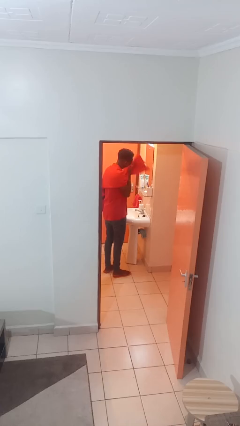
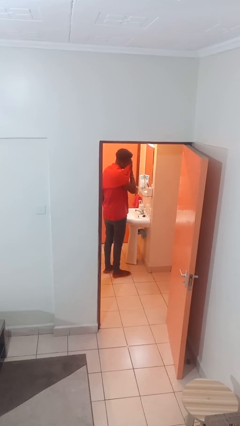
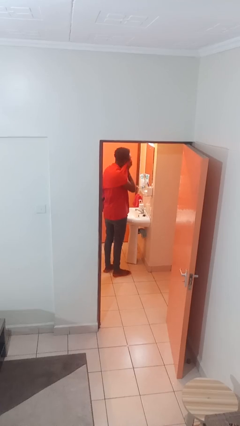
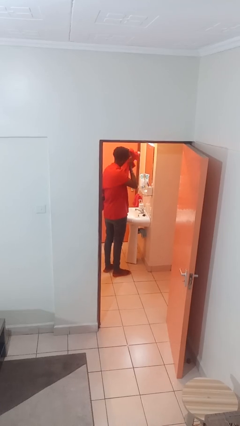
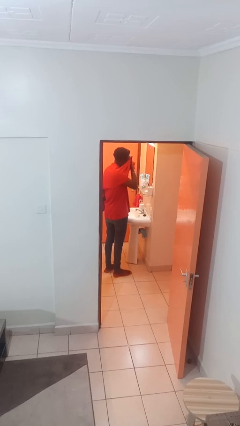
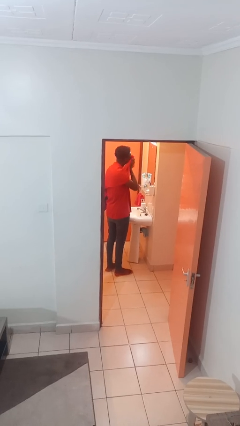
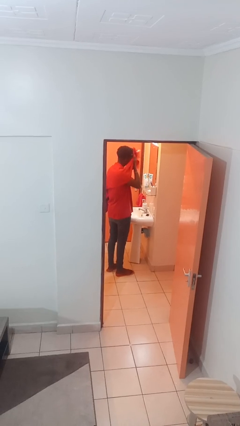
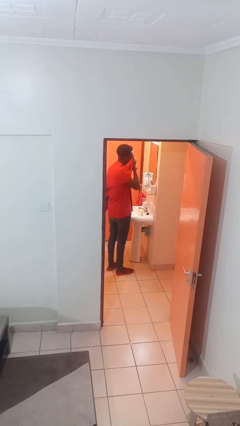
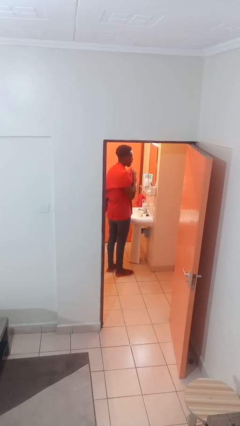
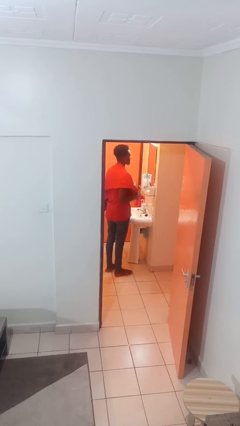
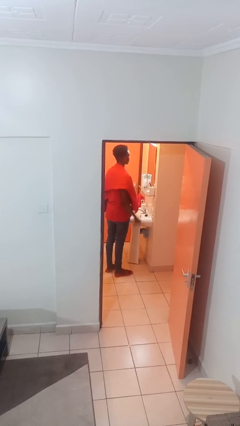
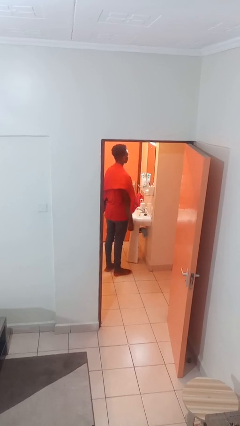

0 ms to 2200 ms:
person dries face with towel

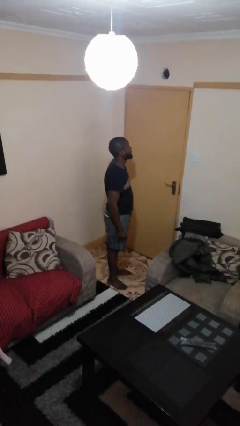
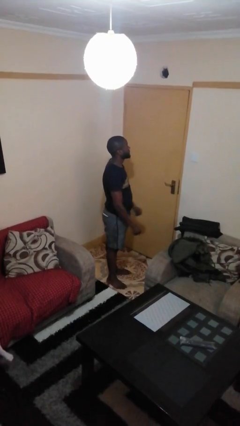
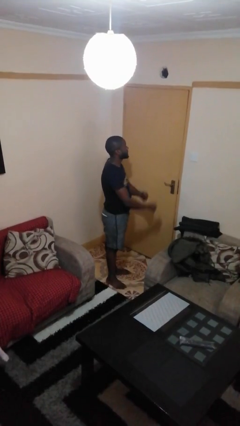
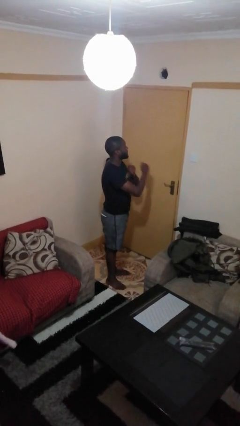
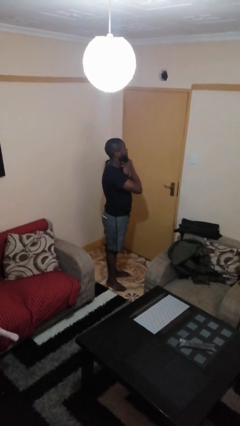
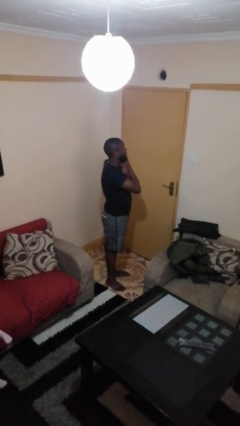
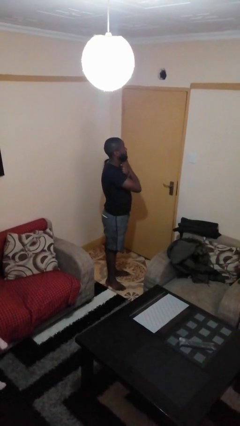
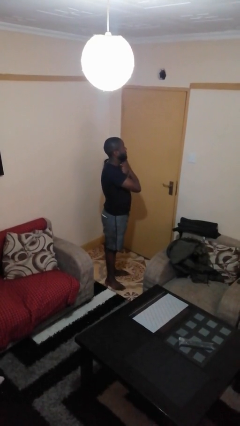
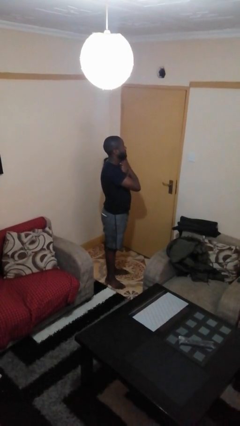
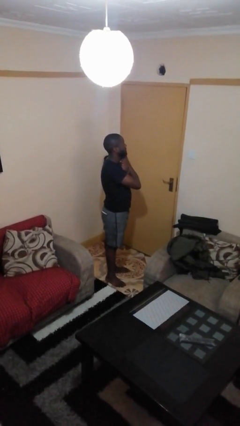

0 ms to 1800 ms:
person gestures arms x

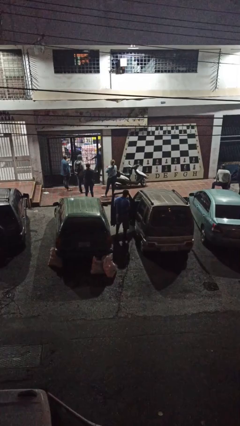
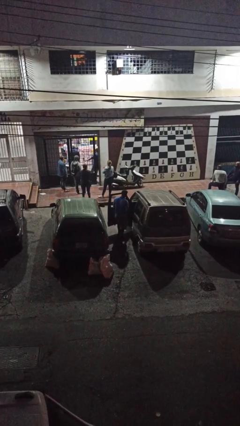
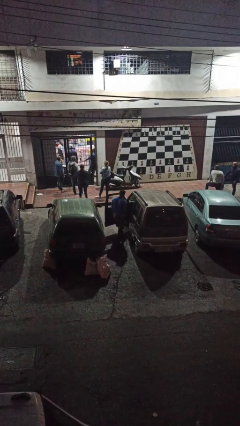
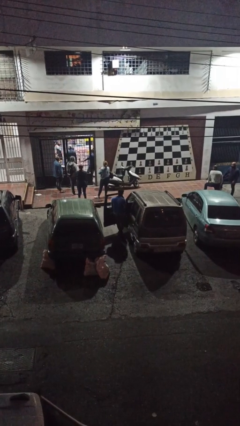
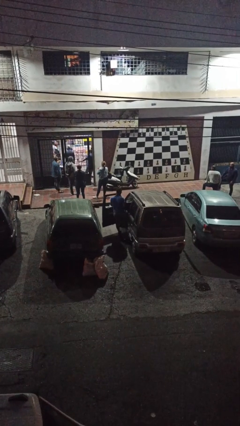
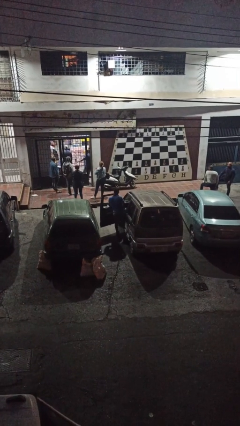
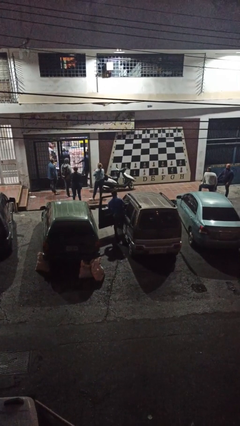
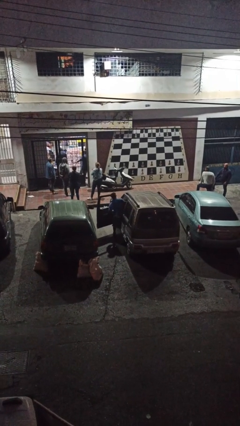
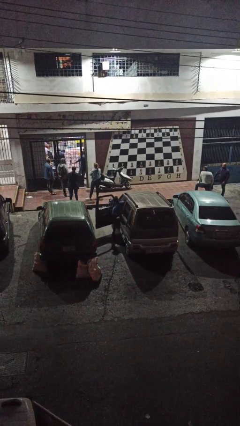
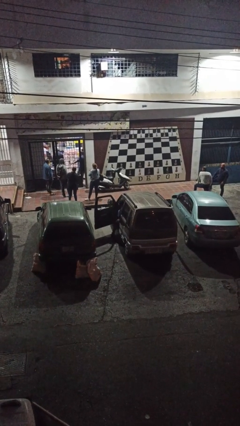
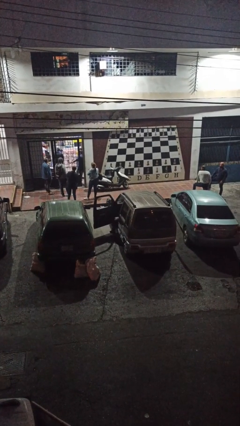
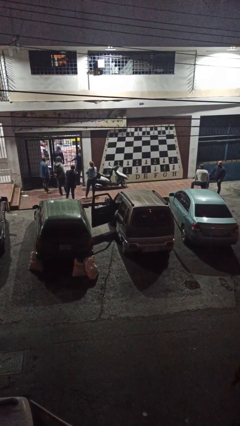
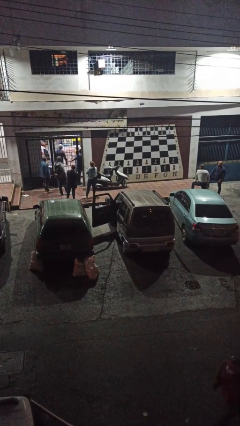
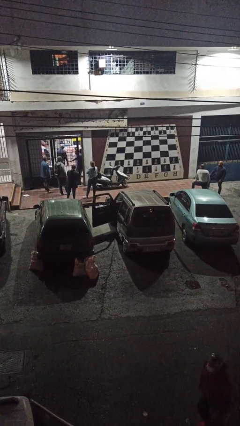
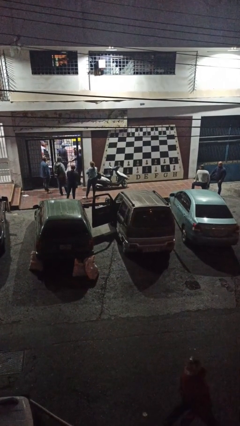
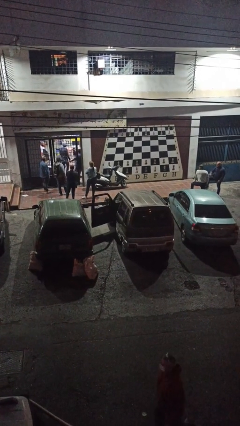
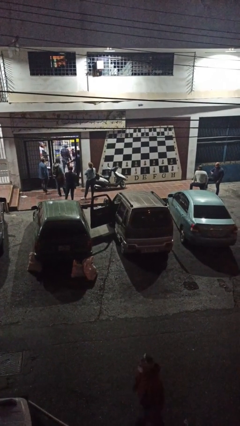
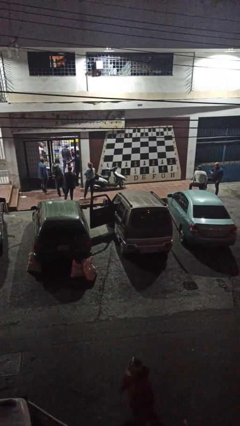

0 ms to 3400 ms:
person enters car

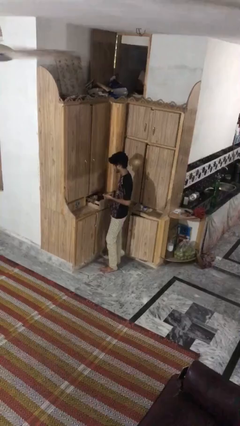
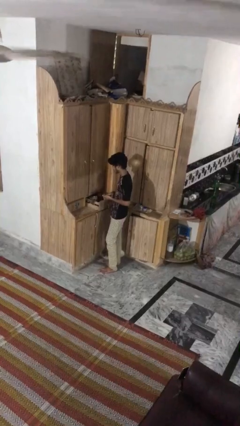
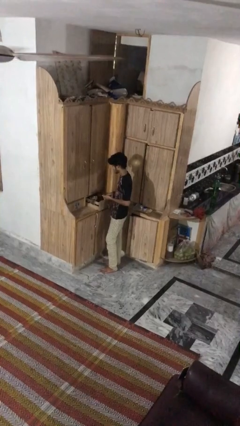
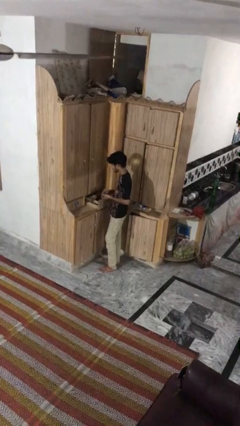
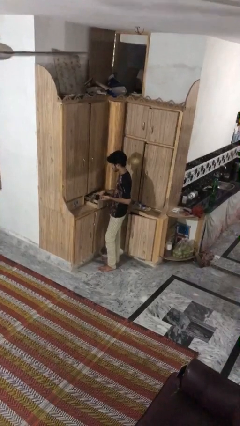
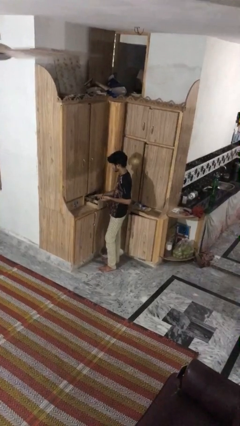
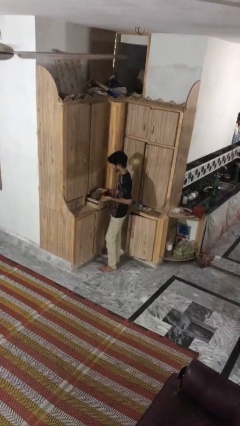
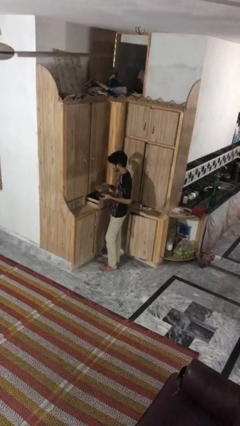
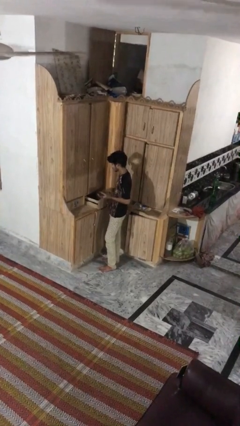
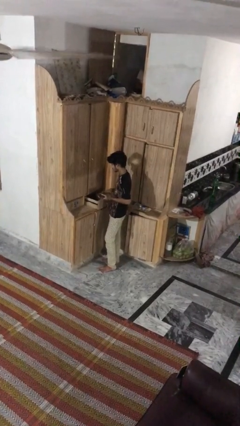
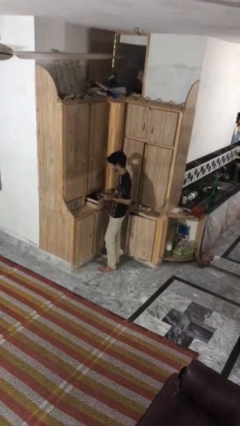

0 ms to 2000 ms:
person takes clothes from dresser

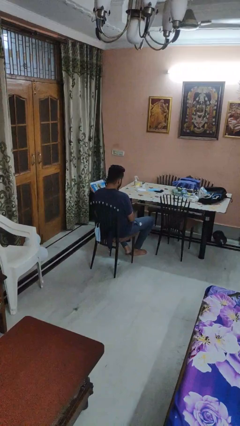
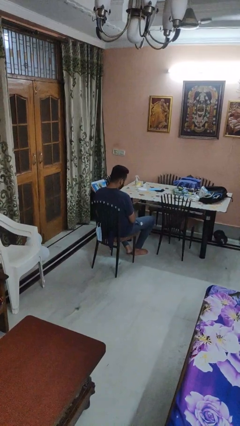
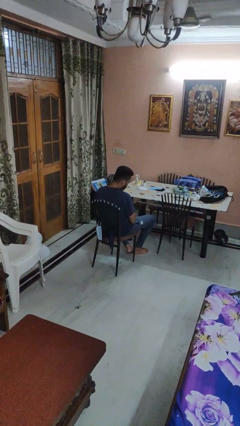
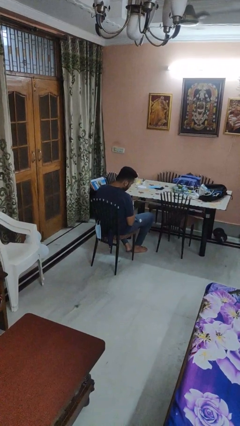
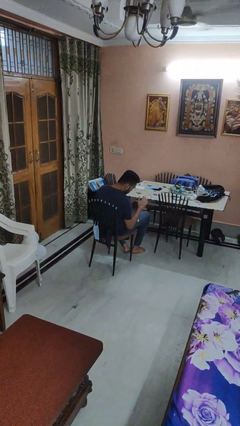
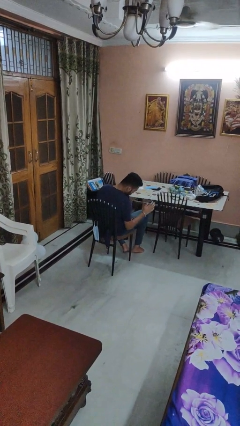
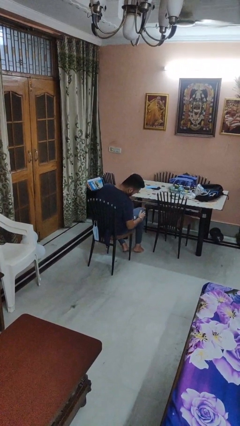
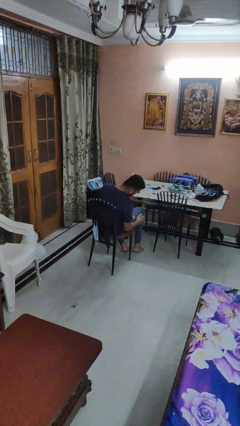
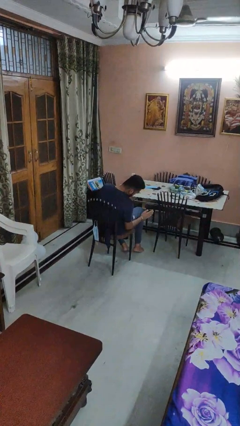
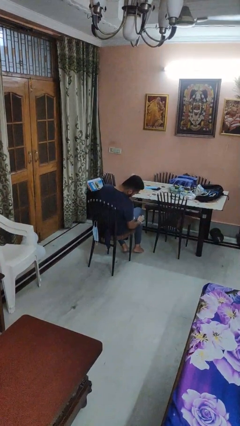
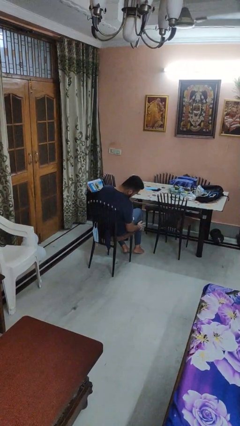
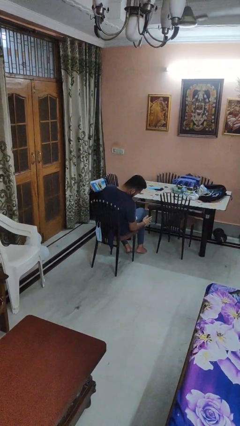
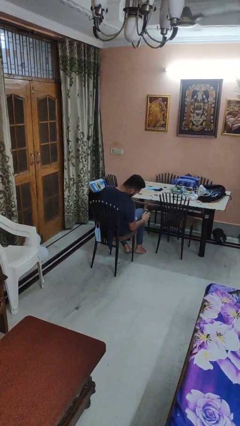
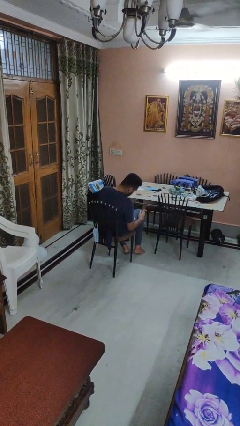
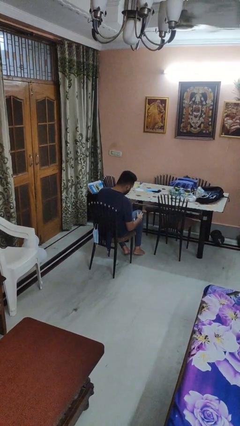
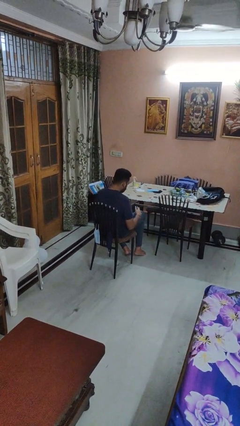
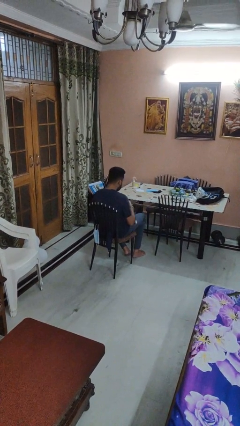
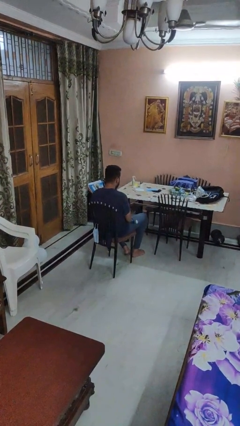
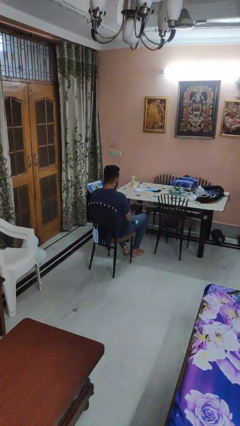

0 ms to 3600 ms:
person swats bug

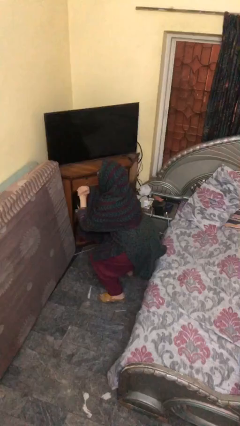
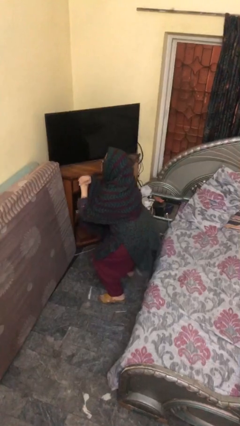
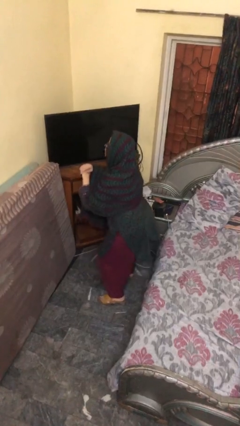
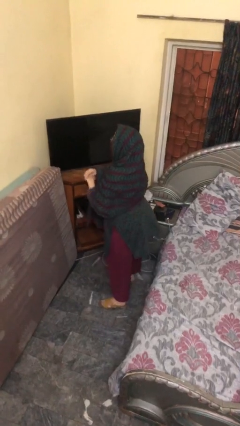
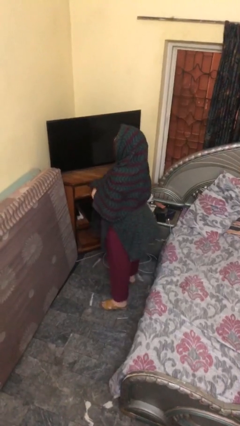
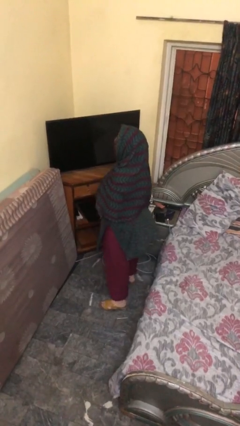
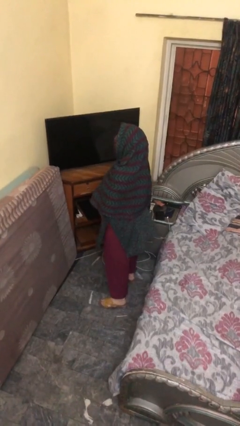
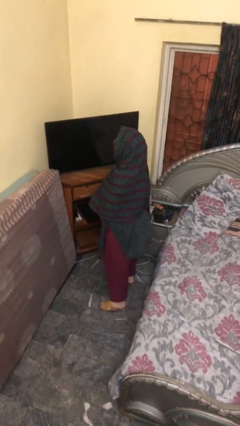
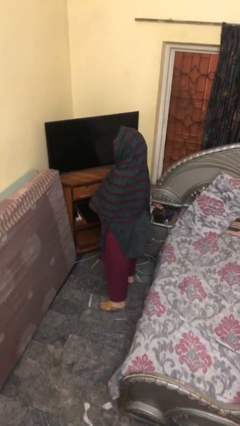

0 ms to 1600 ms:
person stands up

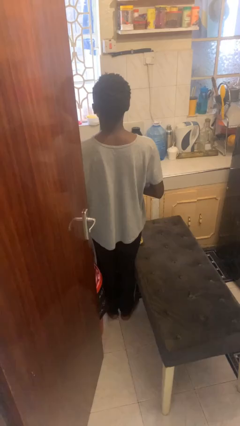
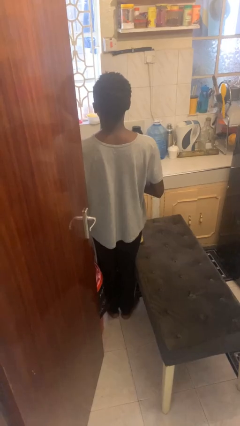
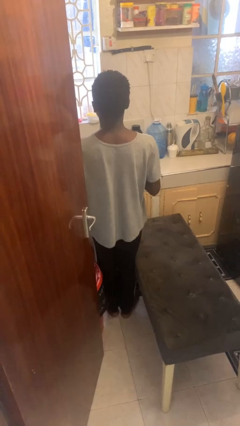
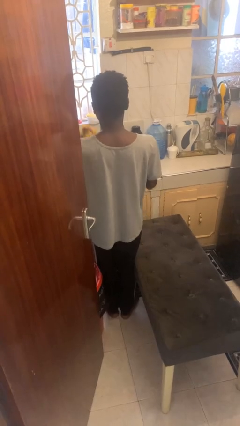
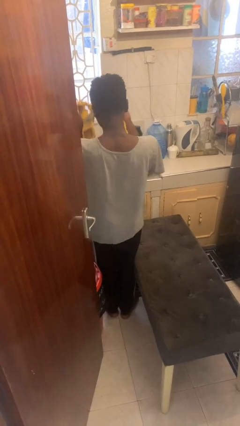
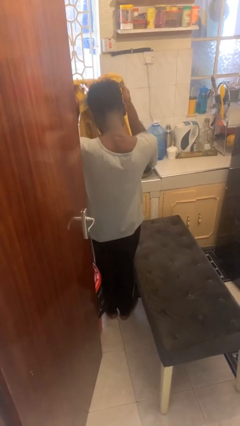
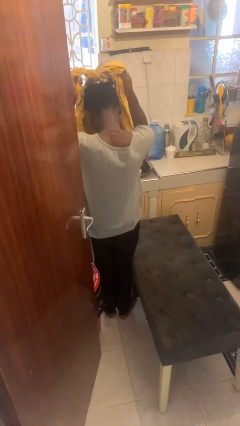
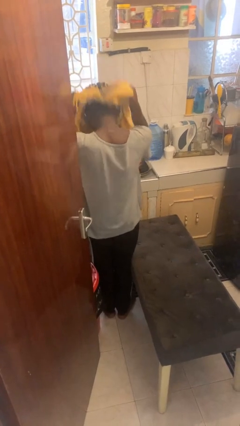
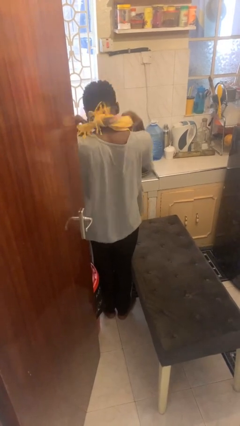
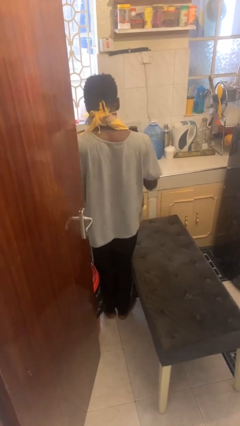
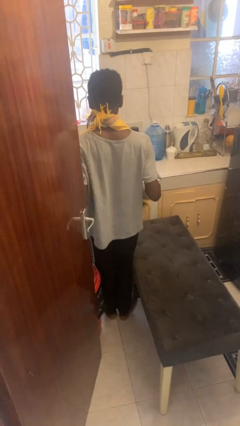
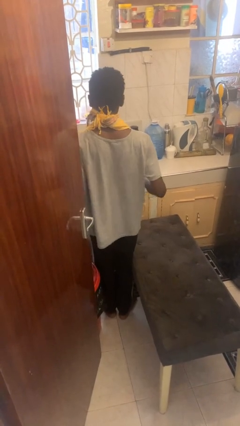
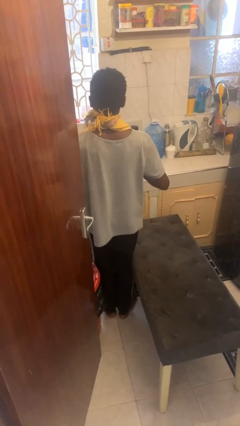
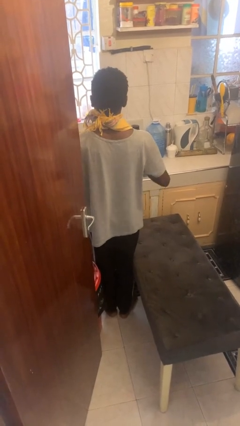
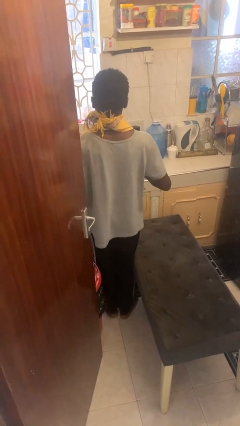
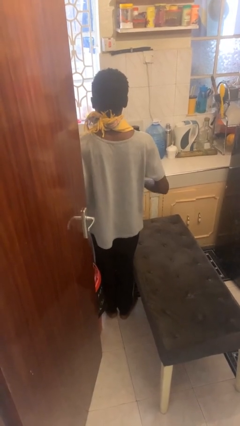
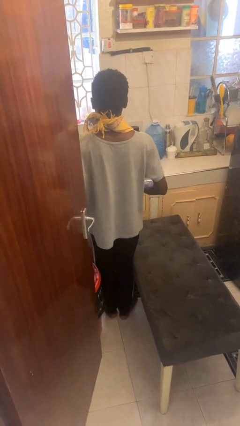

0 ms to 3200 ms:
person puts on apron
